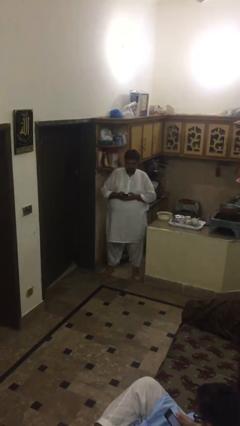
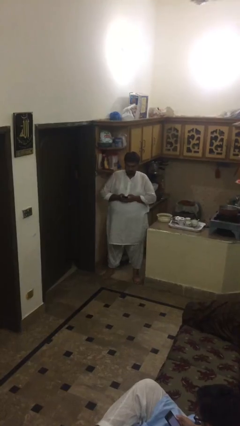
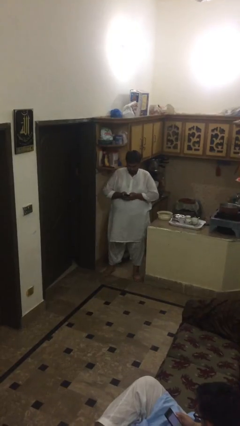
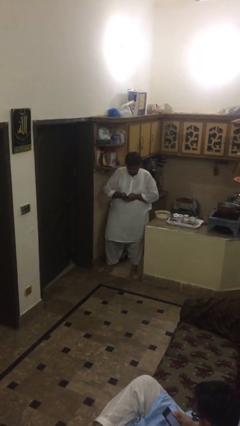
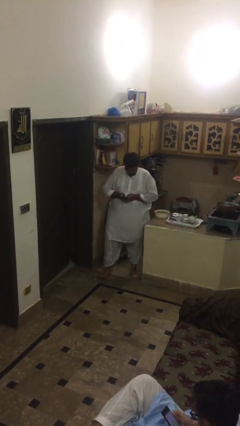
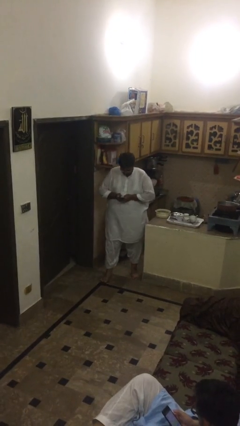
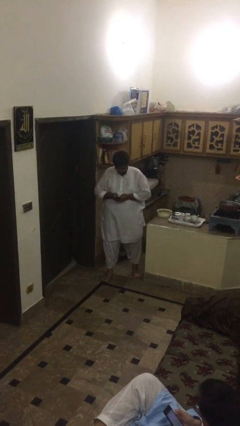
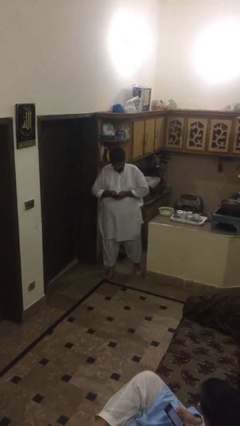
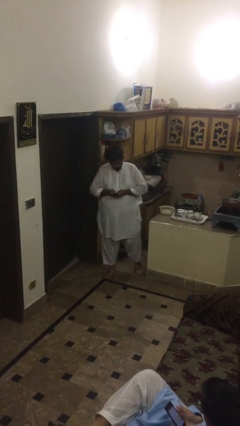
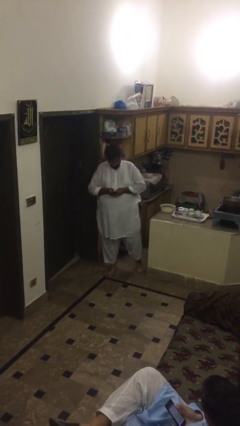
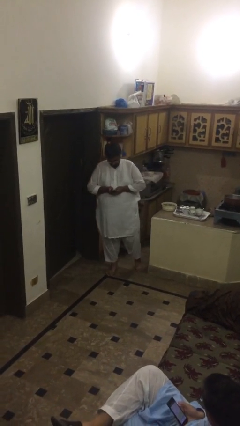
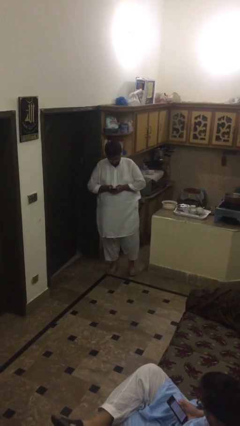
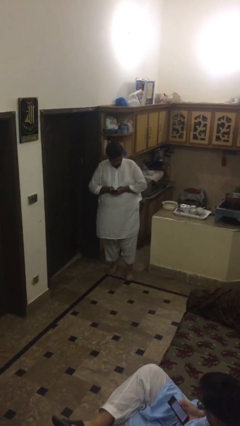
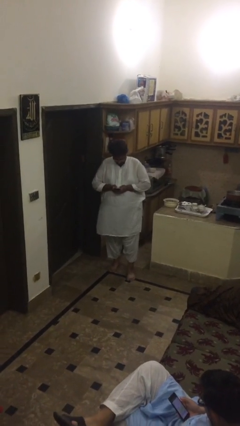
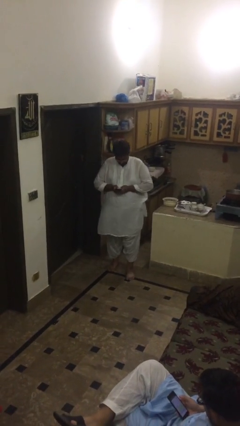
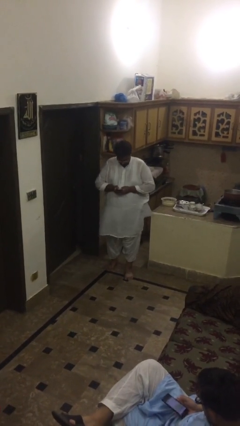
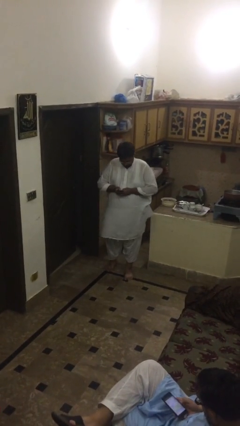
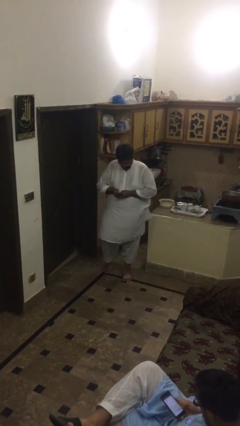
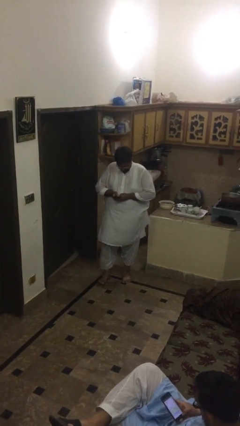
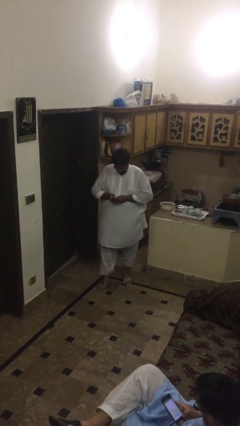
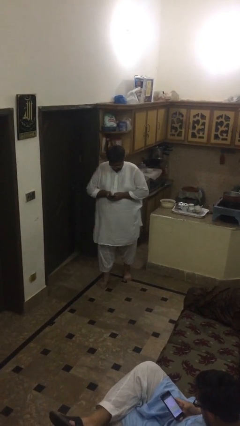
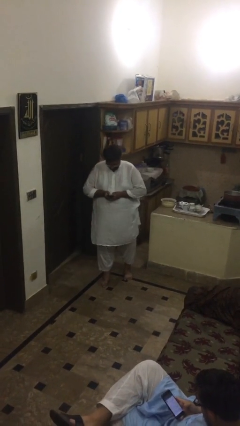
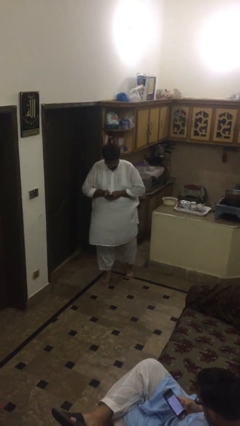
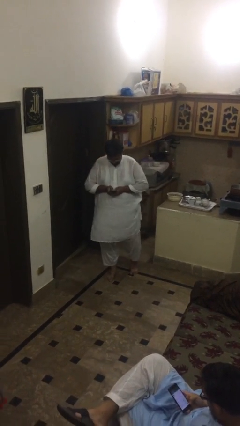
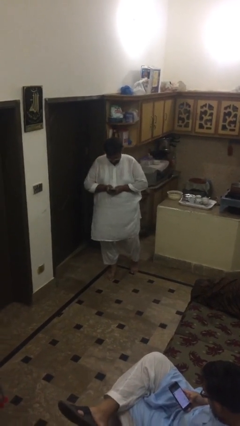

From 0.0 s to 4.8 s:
person texts on phone

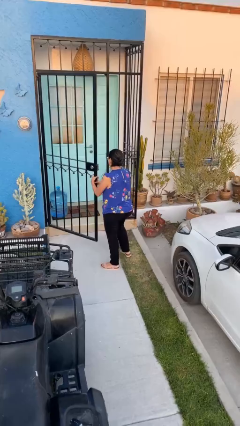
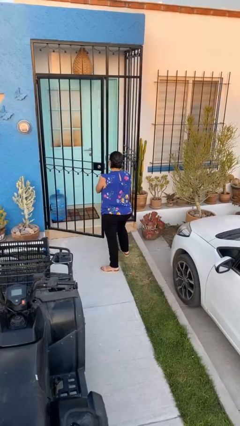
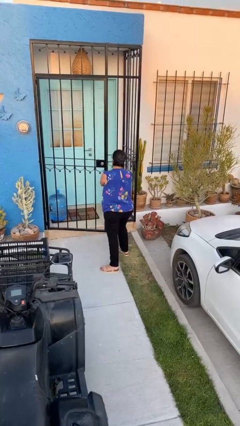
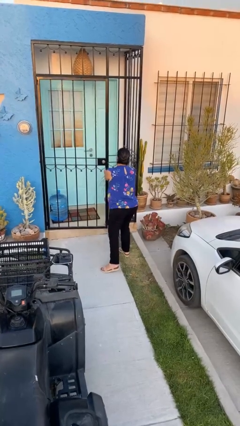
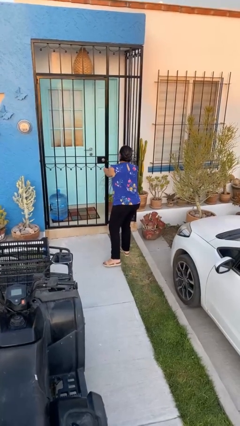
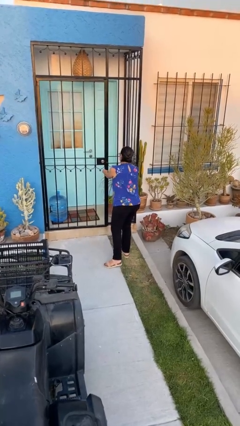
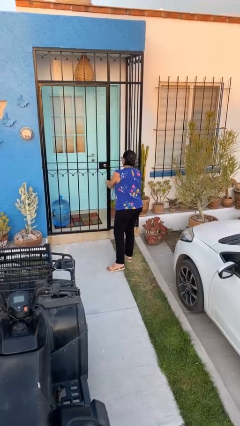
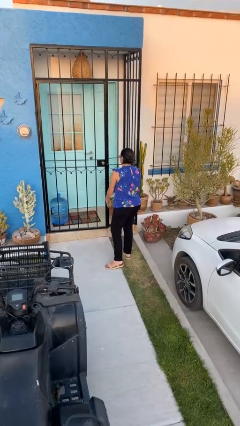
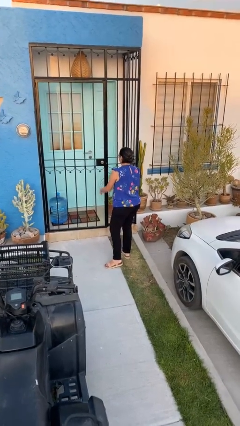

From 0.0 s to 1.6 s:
person closes facility door

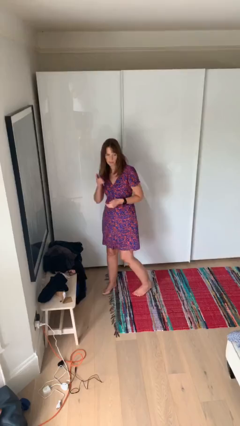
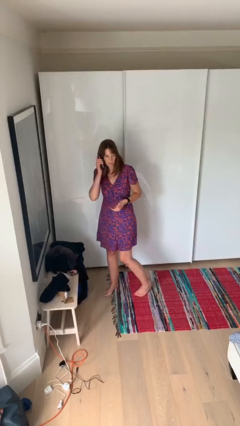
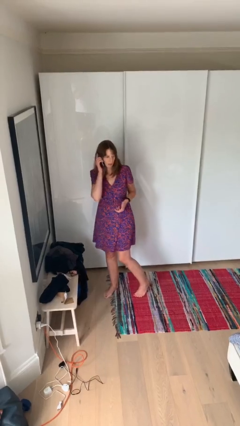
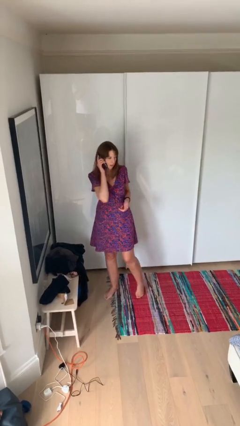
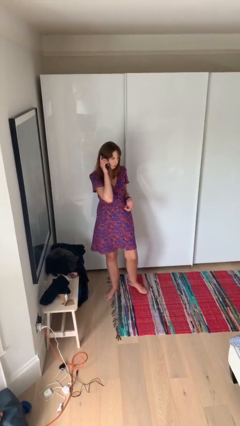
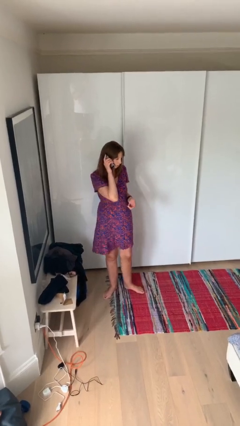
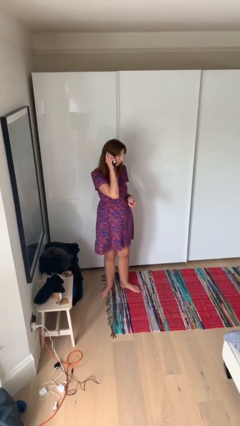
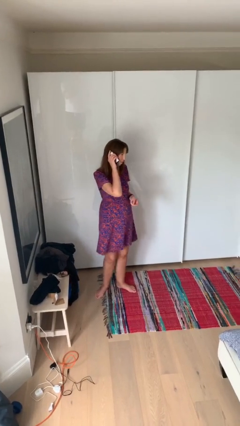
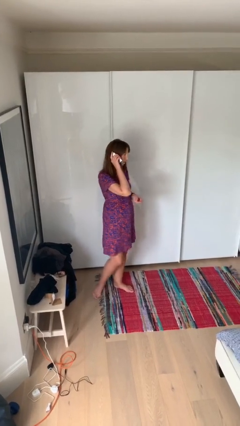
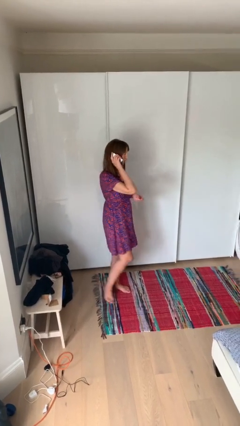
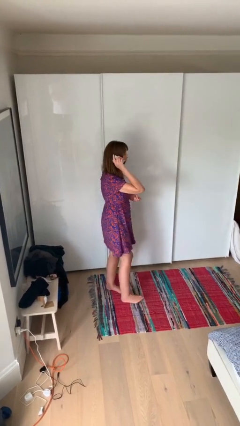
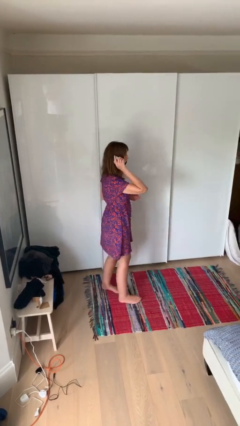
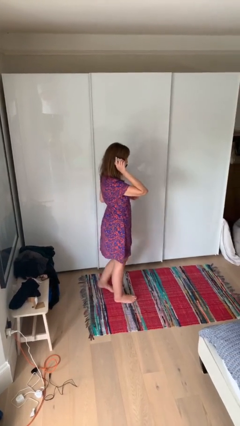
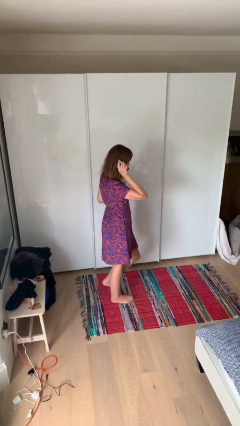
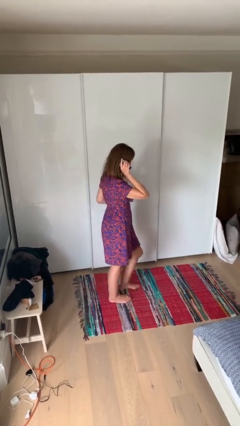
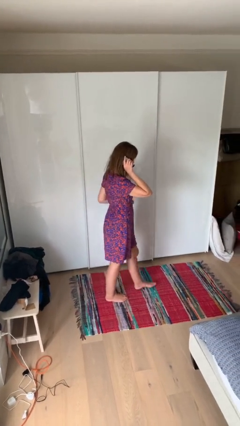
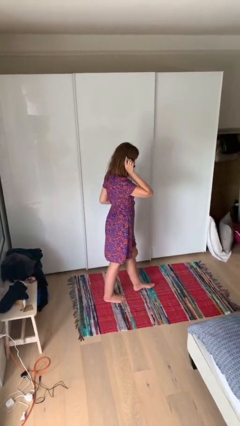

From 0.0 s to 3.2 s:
person talks on phone

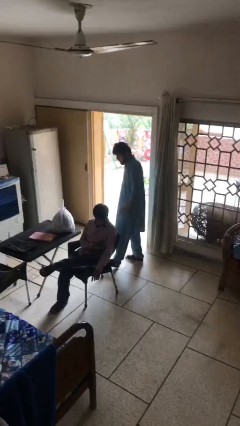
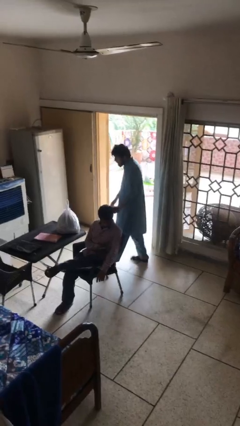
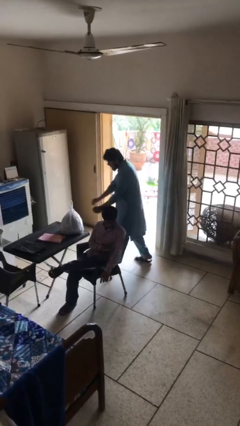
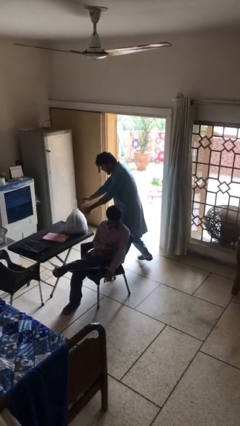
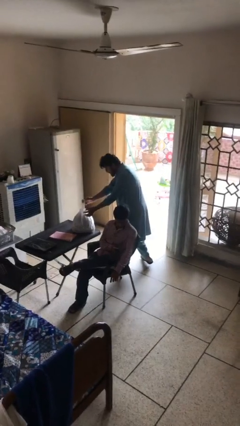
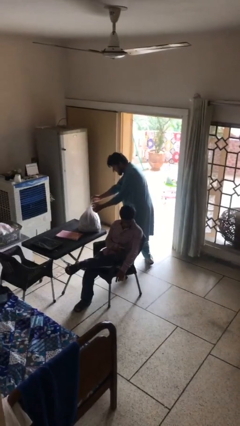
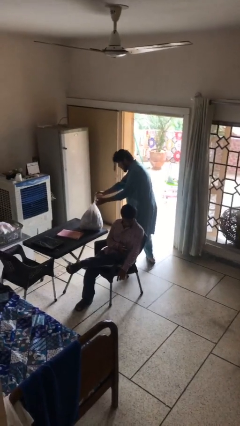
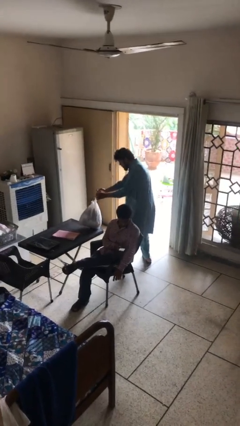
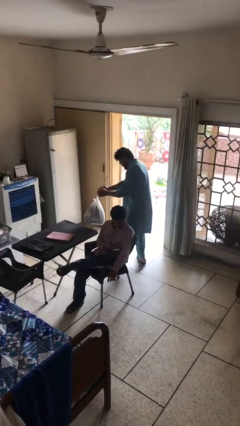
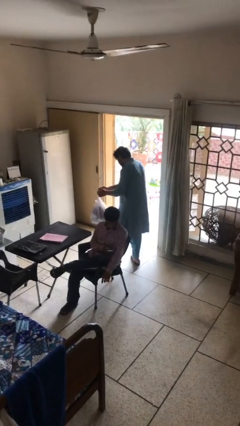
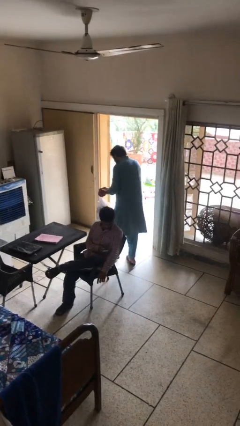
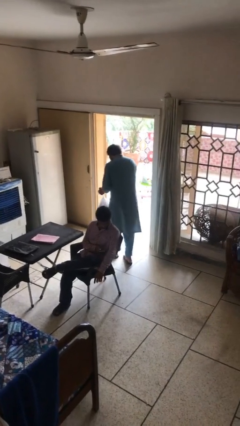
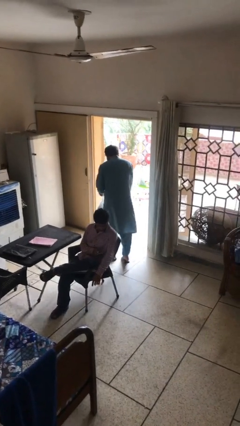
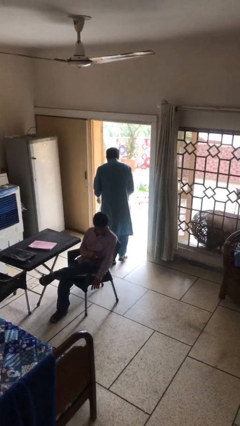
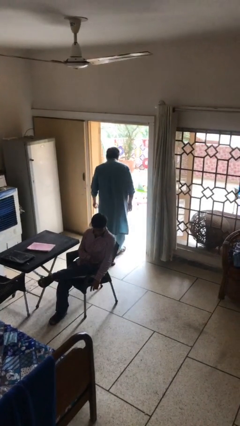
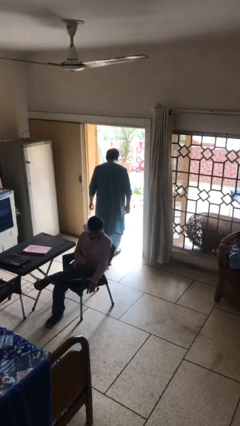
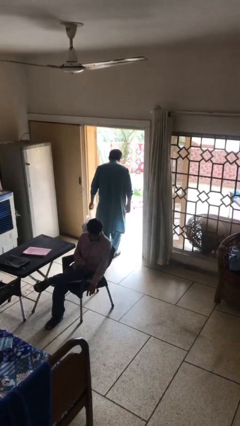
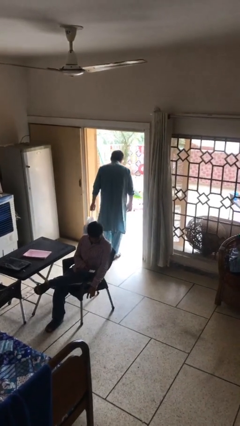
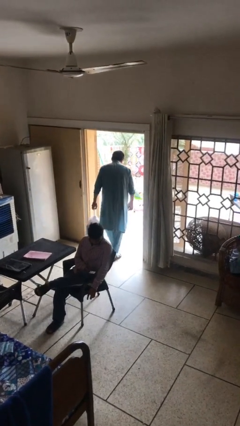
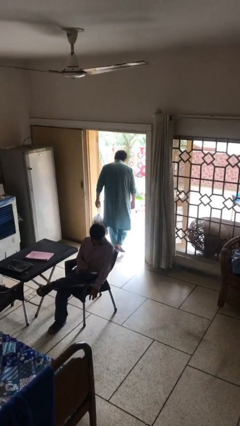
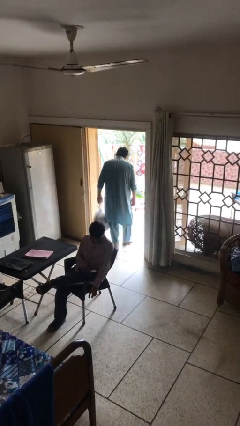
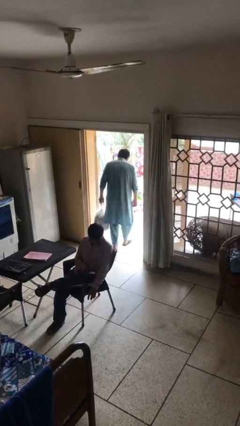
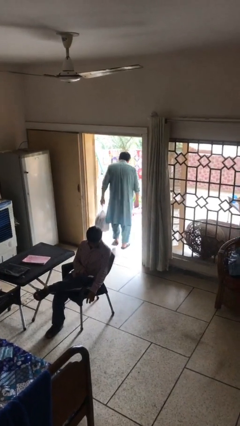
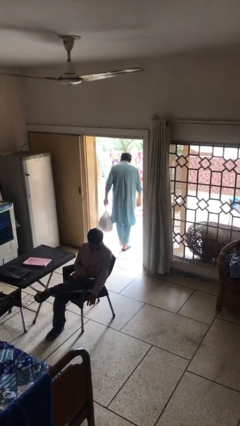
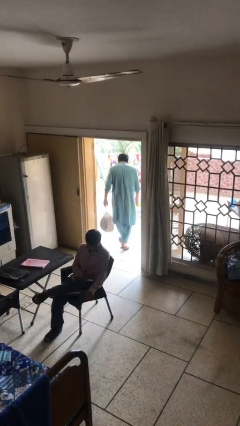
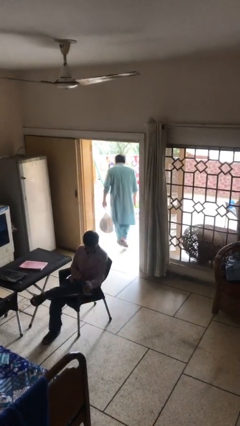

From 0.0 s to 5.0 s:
person steals object from person

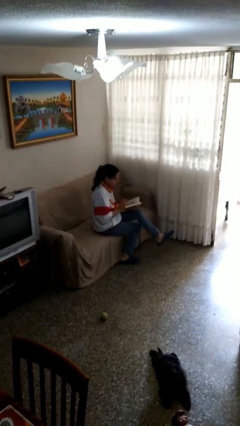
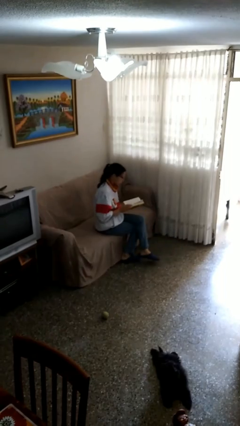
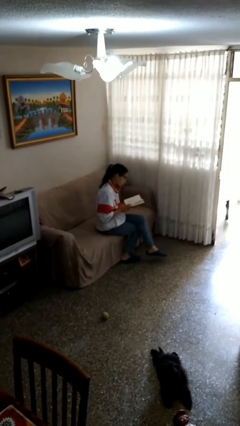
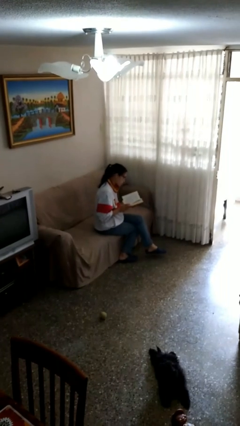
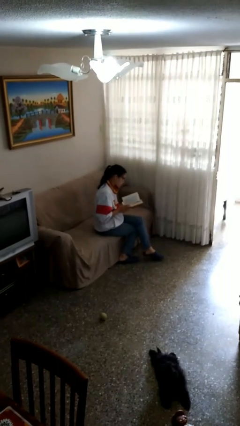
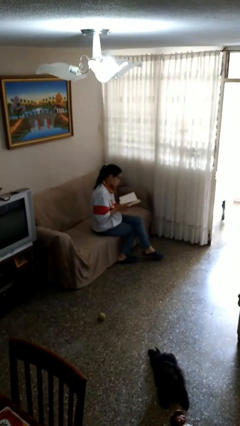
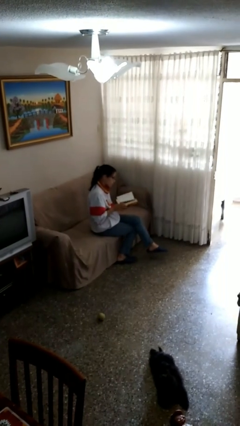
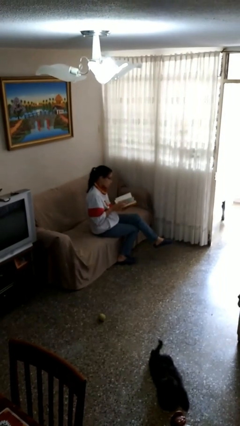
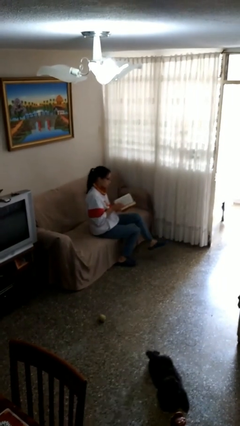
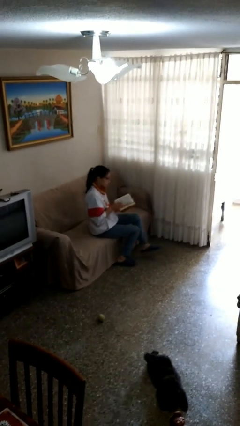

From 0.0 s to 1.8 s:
person reads document

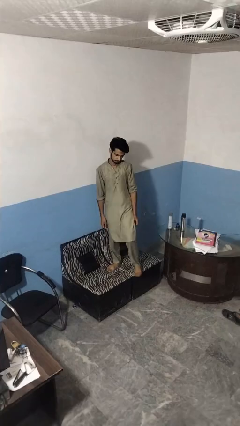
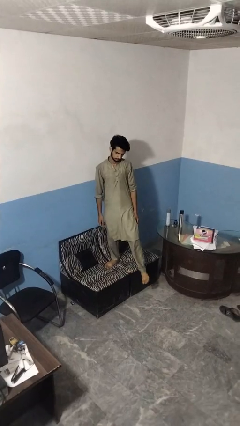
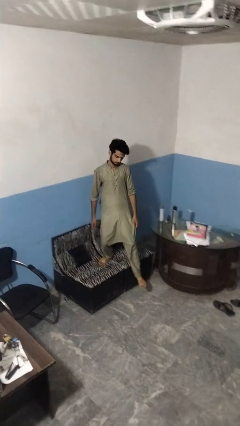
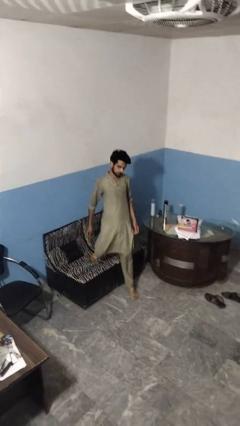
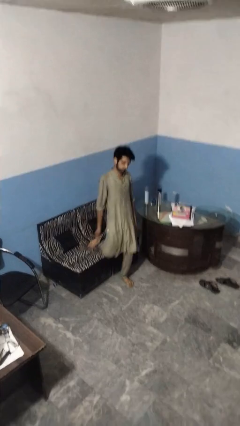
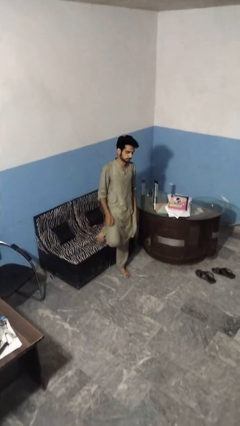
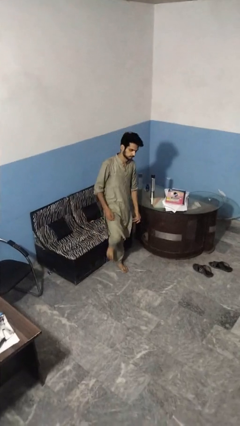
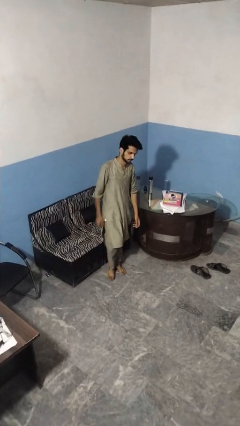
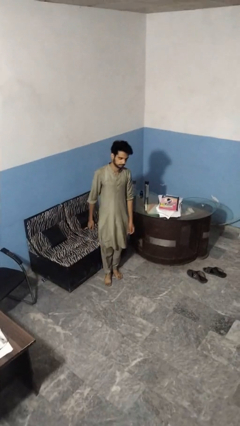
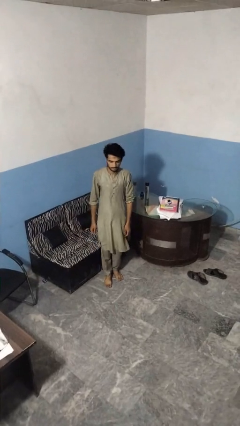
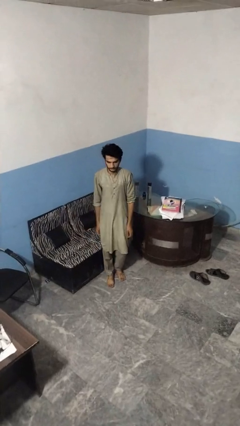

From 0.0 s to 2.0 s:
person climbs off couch
